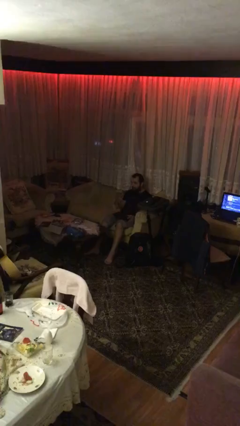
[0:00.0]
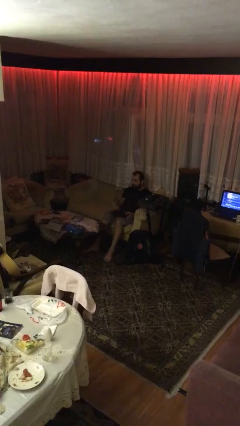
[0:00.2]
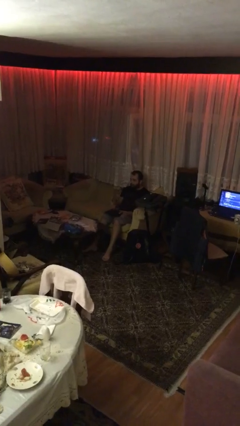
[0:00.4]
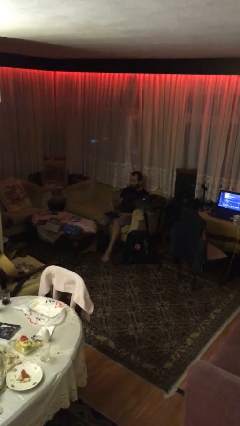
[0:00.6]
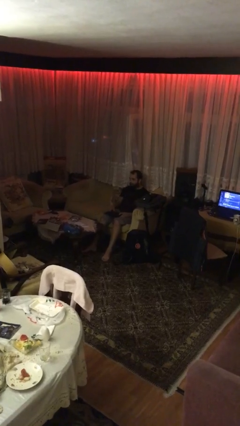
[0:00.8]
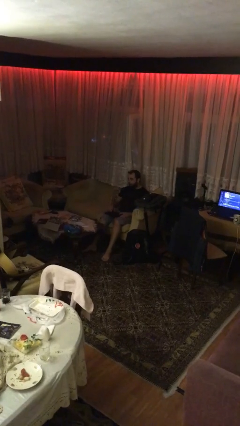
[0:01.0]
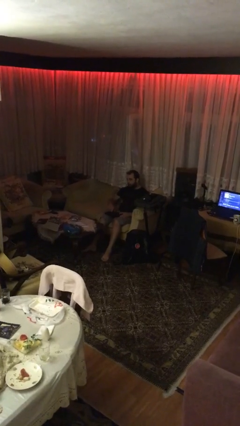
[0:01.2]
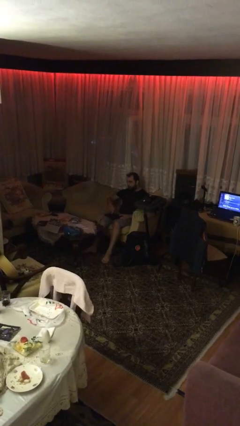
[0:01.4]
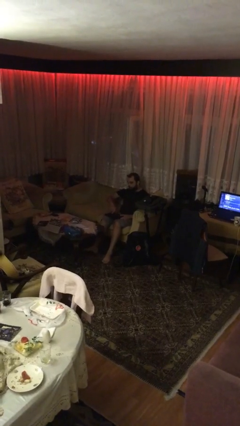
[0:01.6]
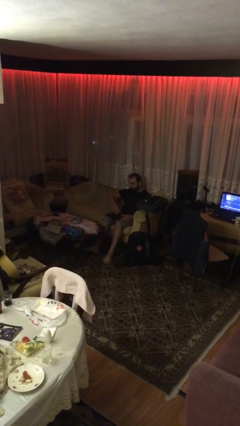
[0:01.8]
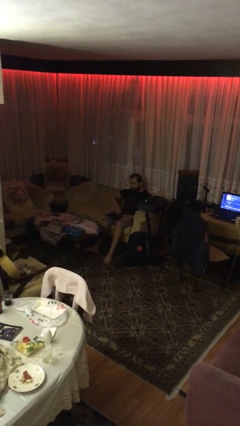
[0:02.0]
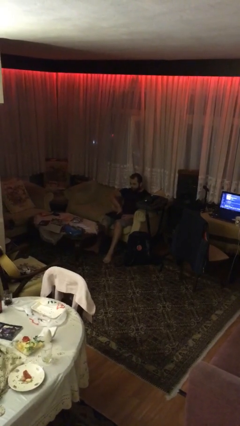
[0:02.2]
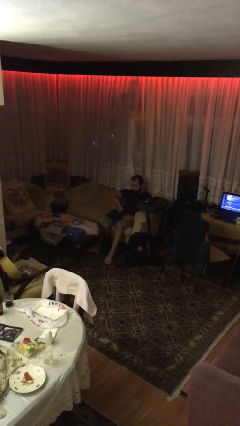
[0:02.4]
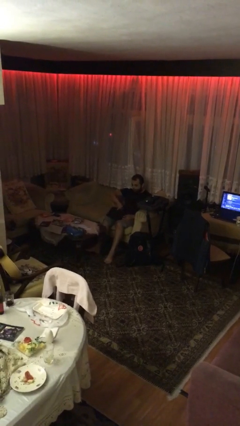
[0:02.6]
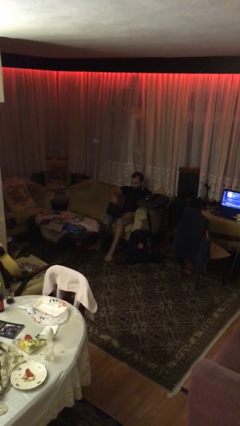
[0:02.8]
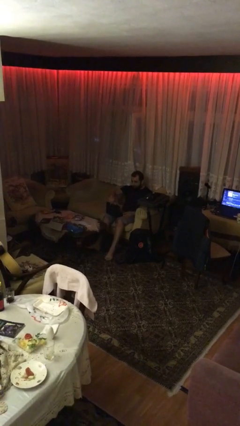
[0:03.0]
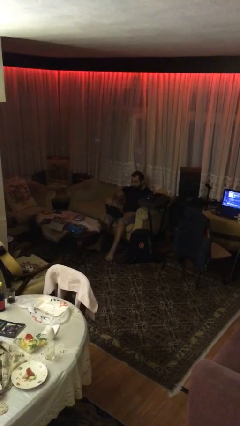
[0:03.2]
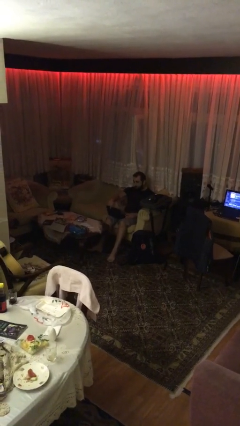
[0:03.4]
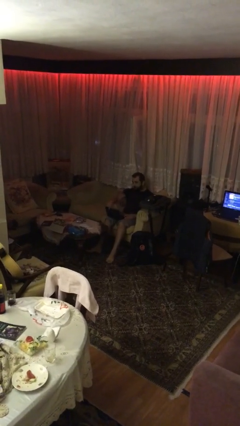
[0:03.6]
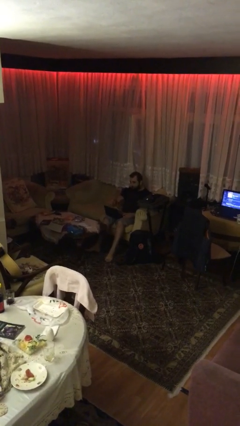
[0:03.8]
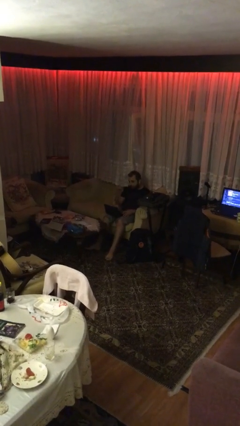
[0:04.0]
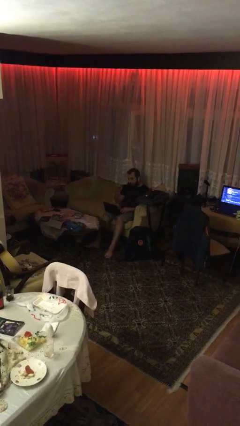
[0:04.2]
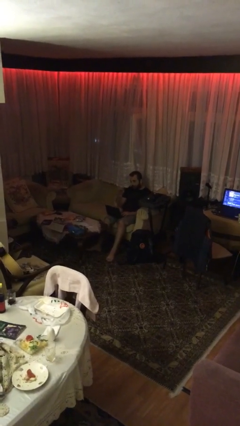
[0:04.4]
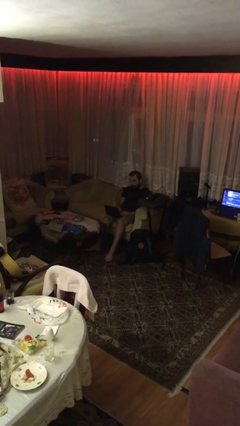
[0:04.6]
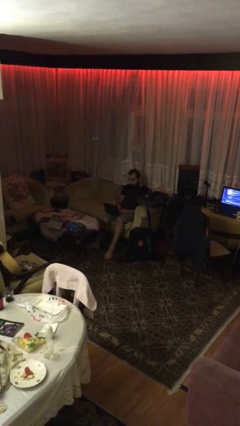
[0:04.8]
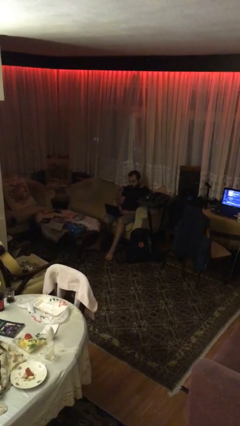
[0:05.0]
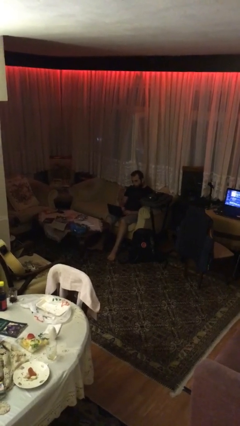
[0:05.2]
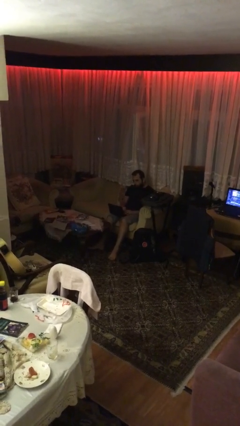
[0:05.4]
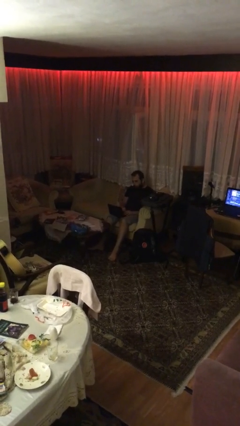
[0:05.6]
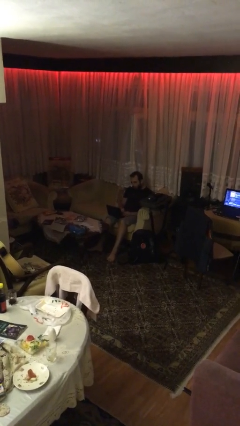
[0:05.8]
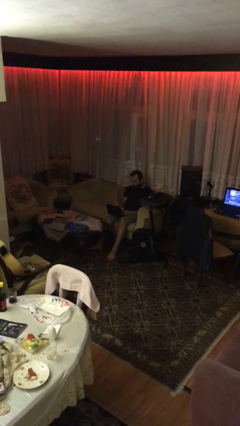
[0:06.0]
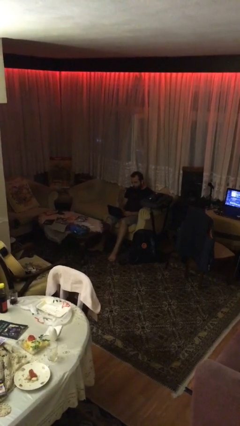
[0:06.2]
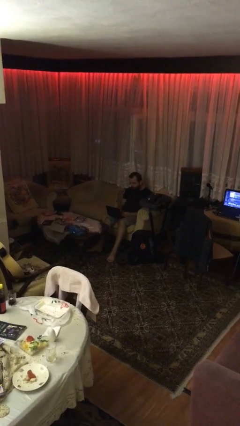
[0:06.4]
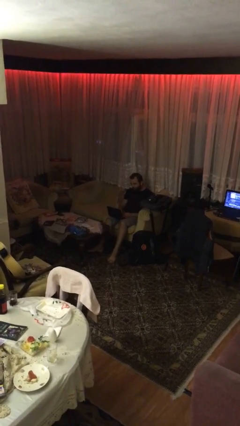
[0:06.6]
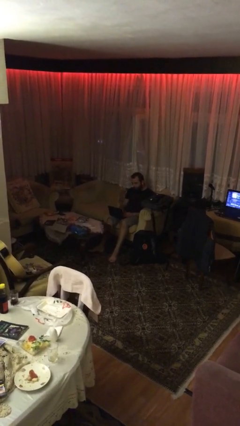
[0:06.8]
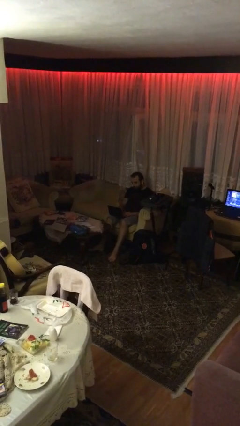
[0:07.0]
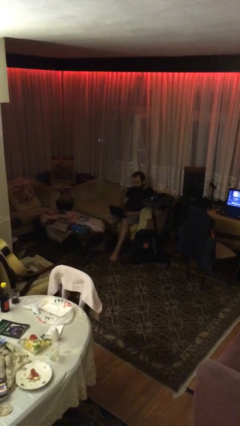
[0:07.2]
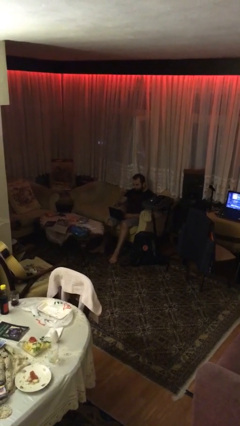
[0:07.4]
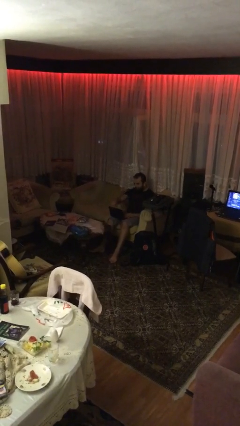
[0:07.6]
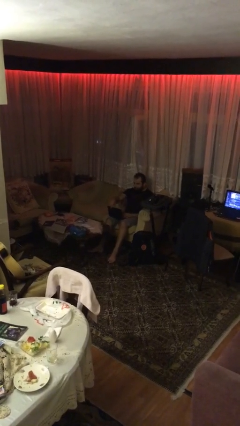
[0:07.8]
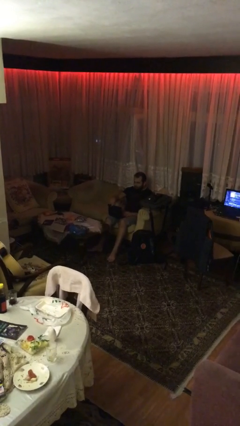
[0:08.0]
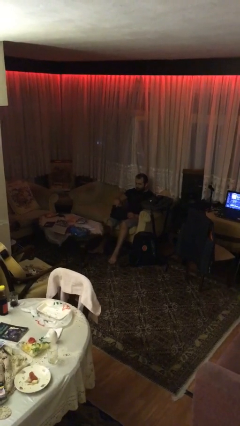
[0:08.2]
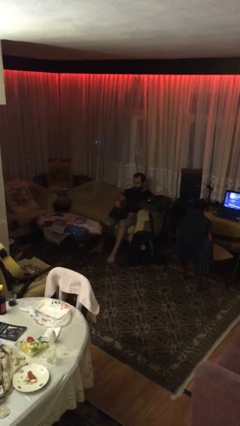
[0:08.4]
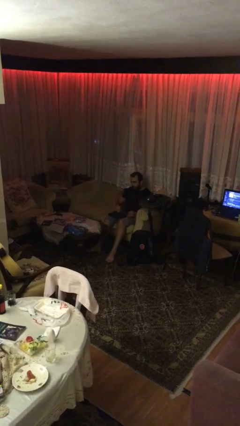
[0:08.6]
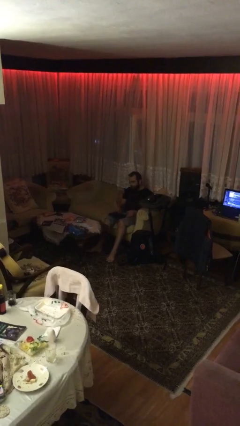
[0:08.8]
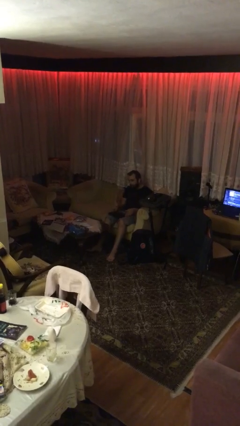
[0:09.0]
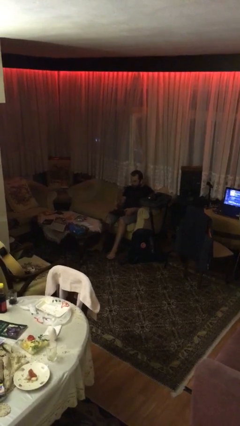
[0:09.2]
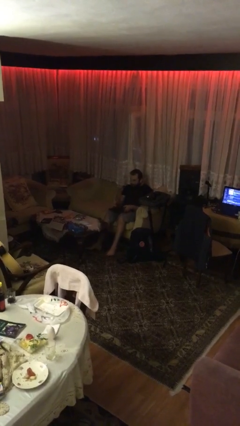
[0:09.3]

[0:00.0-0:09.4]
person interacts with laptop

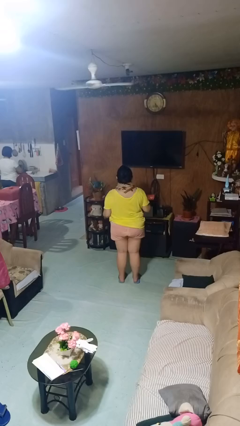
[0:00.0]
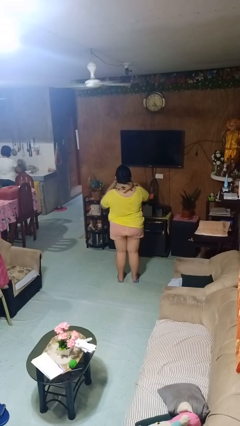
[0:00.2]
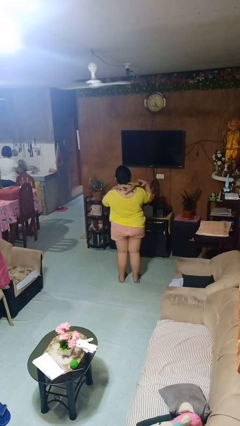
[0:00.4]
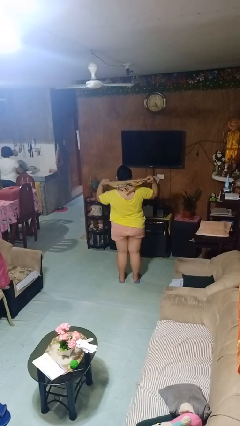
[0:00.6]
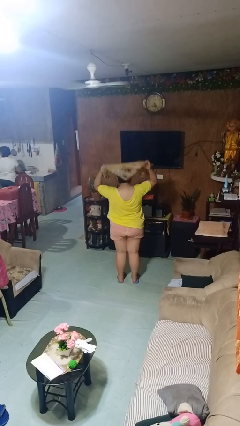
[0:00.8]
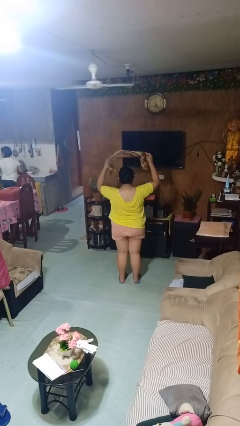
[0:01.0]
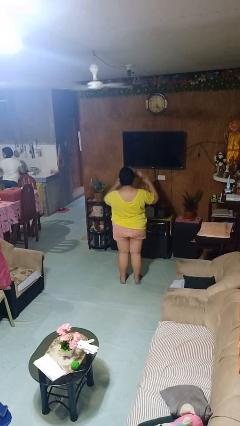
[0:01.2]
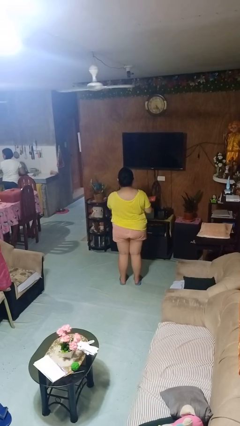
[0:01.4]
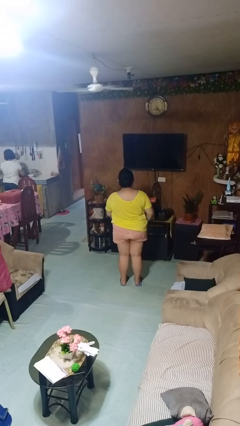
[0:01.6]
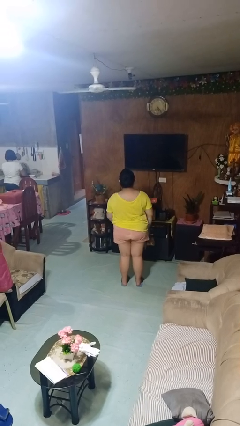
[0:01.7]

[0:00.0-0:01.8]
person takes off scarf

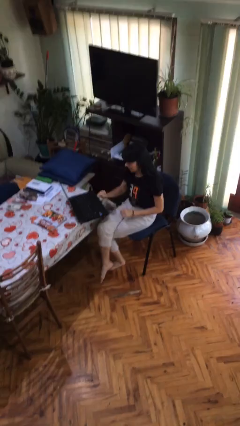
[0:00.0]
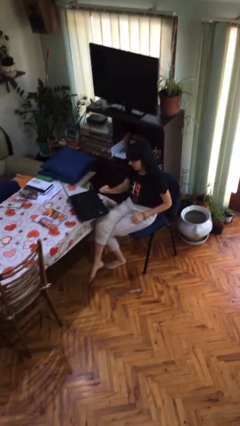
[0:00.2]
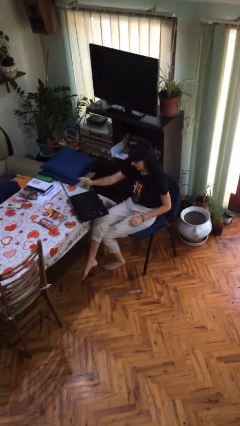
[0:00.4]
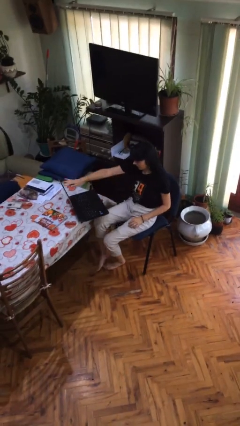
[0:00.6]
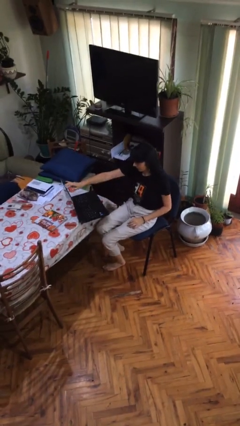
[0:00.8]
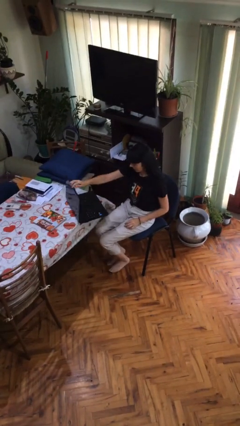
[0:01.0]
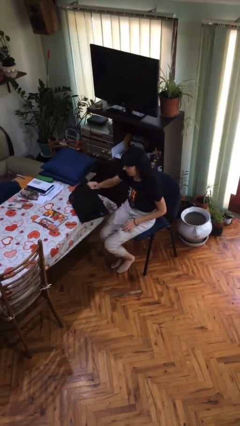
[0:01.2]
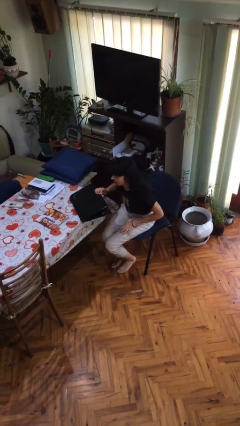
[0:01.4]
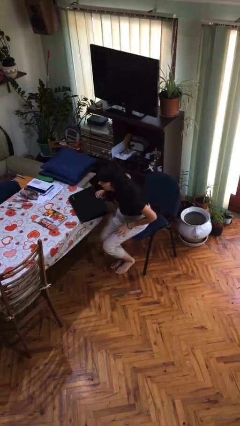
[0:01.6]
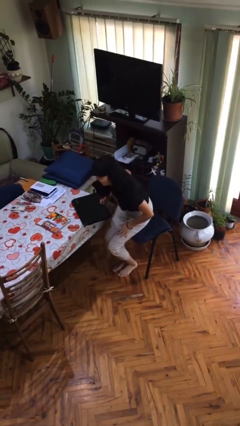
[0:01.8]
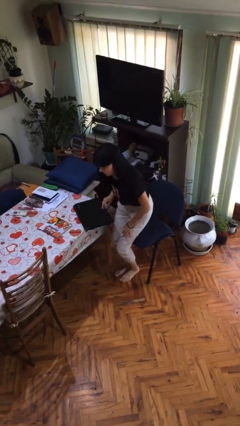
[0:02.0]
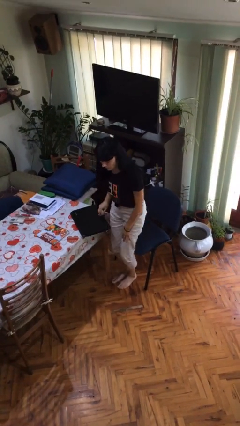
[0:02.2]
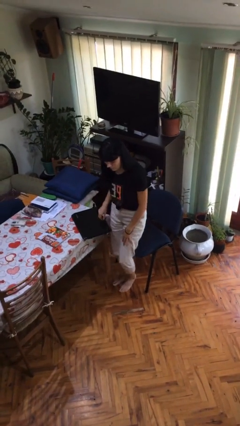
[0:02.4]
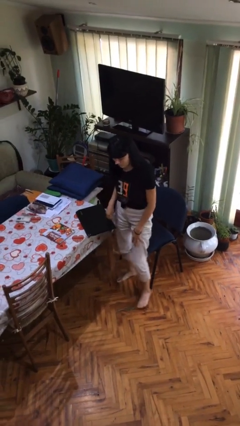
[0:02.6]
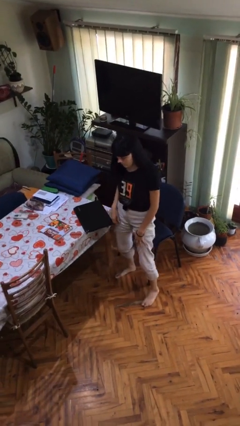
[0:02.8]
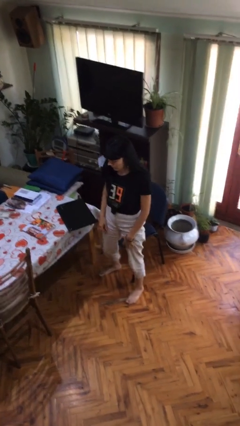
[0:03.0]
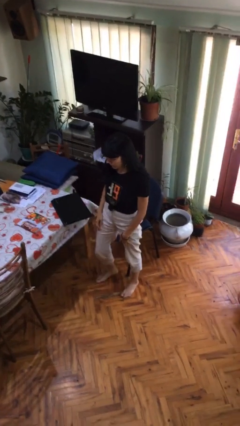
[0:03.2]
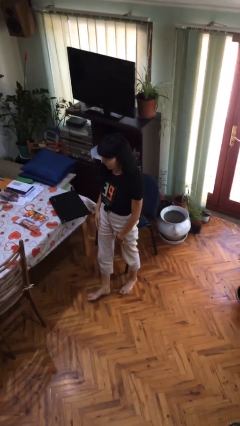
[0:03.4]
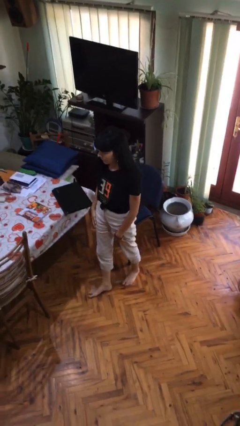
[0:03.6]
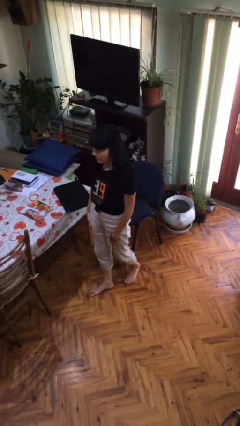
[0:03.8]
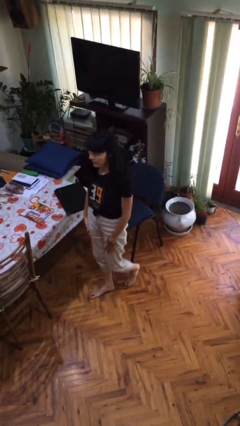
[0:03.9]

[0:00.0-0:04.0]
person stands up

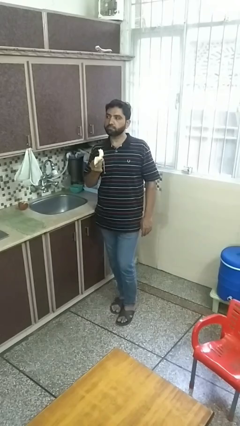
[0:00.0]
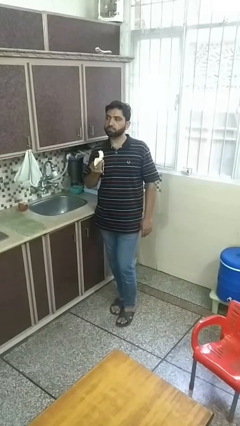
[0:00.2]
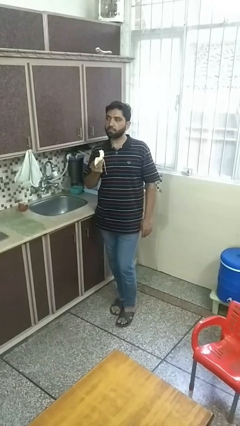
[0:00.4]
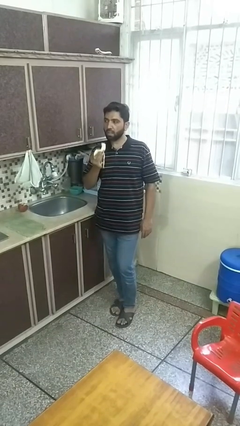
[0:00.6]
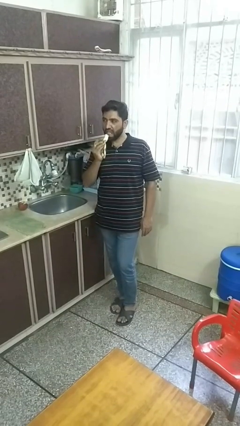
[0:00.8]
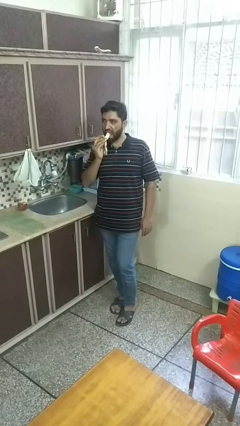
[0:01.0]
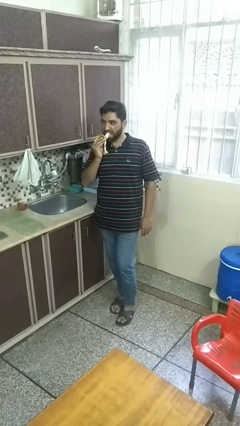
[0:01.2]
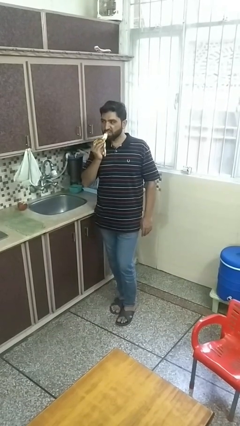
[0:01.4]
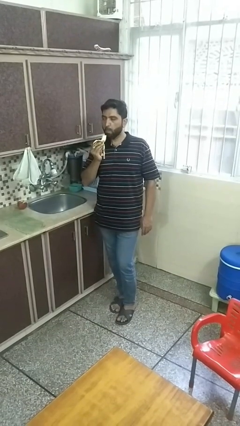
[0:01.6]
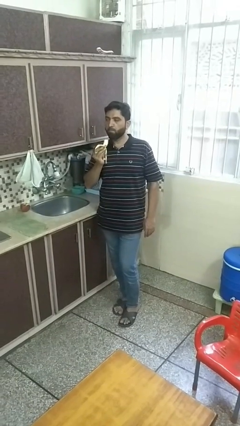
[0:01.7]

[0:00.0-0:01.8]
person eats banana

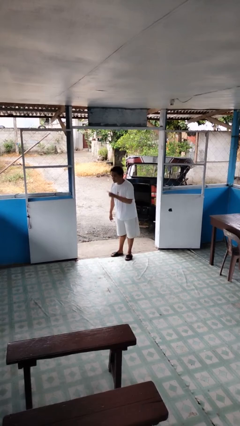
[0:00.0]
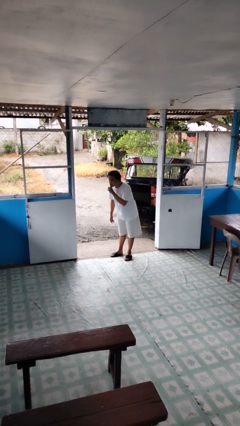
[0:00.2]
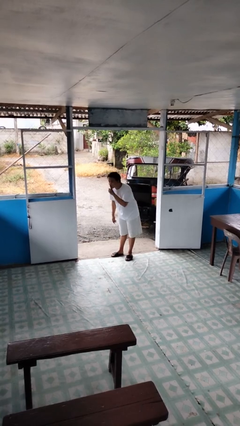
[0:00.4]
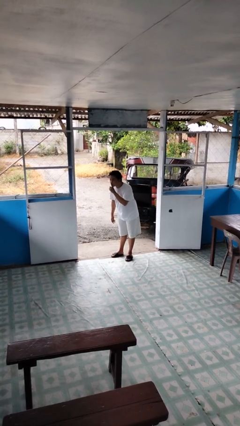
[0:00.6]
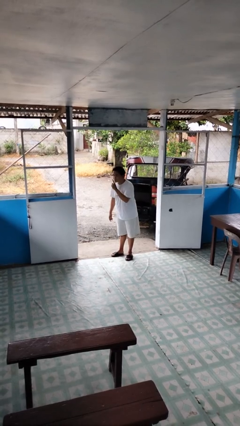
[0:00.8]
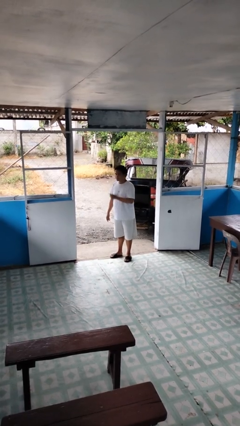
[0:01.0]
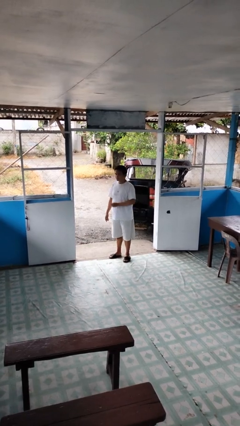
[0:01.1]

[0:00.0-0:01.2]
person gestures be quiet
